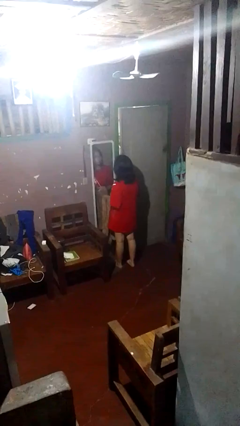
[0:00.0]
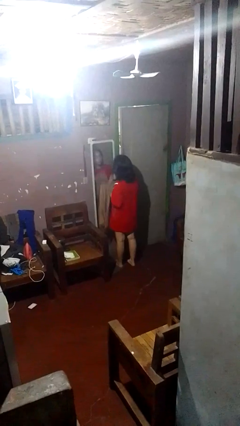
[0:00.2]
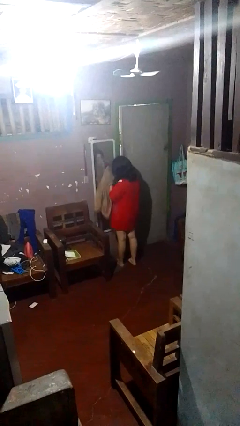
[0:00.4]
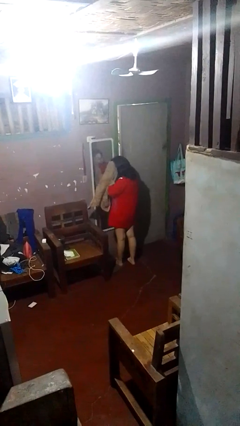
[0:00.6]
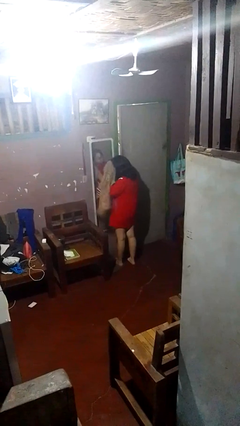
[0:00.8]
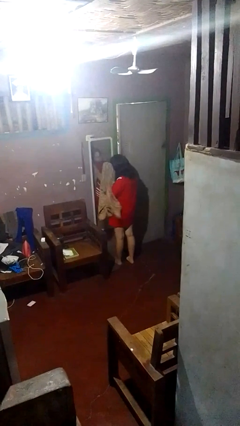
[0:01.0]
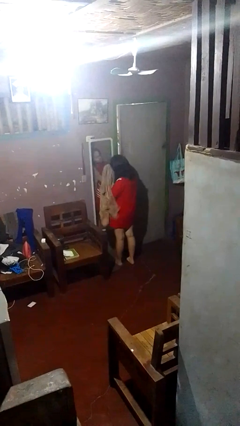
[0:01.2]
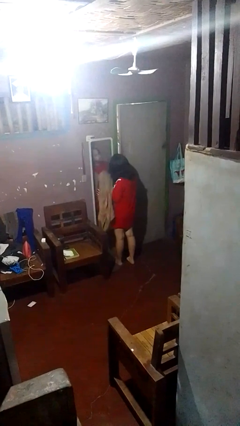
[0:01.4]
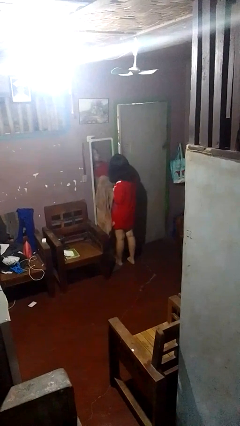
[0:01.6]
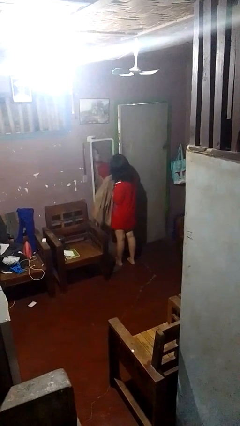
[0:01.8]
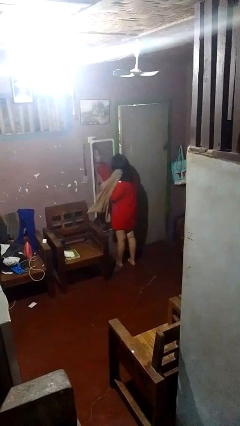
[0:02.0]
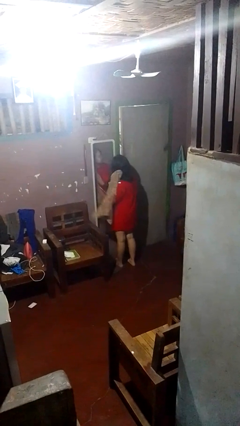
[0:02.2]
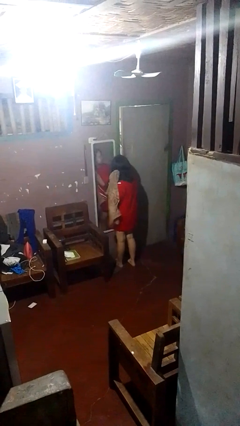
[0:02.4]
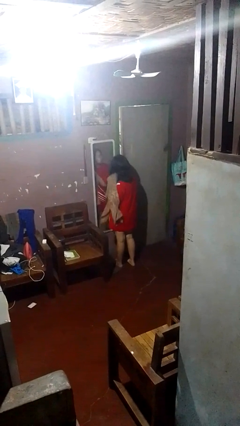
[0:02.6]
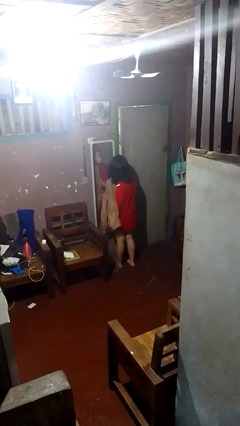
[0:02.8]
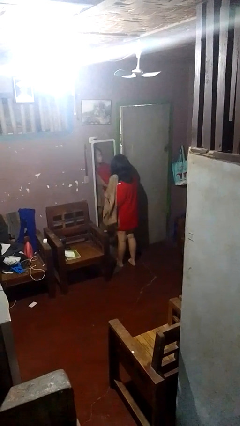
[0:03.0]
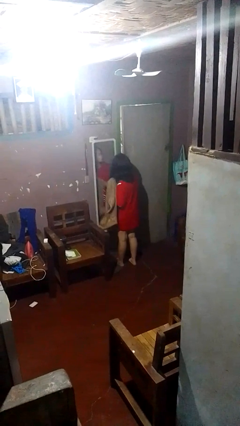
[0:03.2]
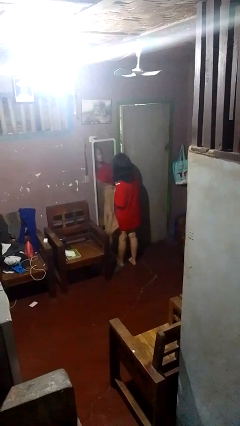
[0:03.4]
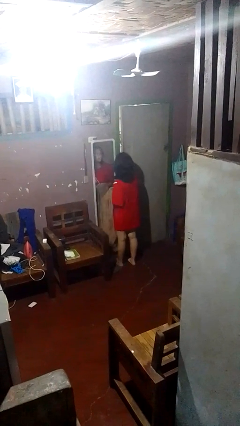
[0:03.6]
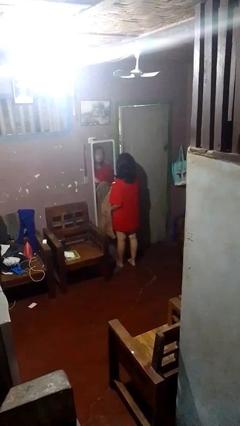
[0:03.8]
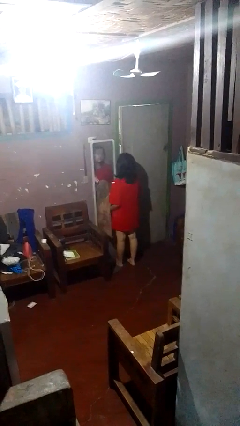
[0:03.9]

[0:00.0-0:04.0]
person dries hair with towel

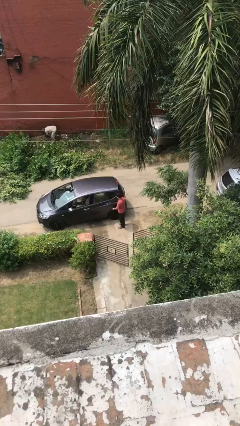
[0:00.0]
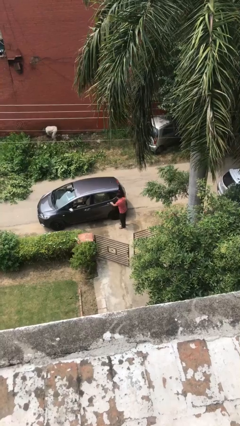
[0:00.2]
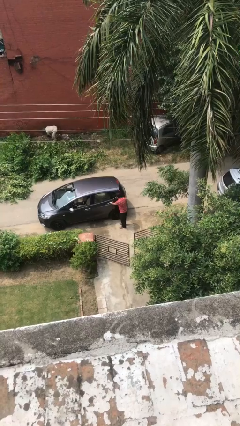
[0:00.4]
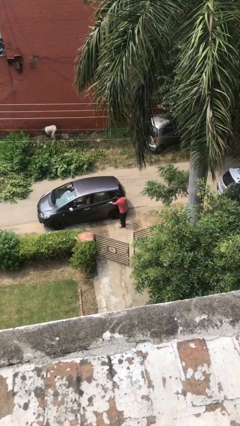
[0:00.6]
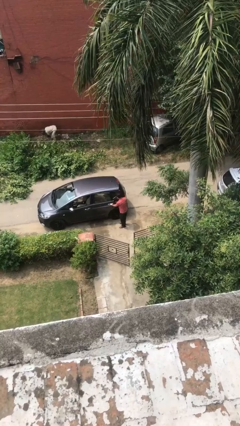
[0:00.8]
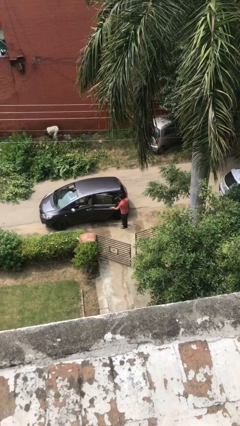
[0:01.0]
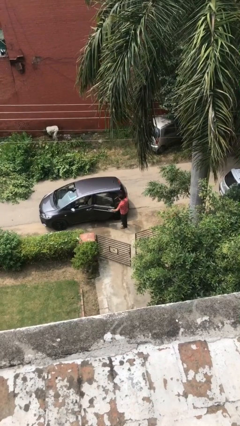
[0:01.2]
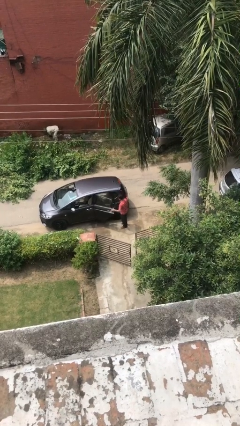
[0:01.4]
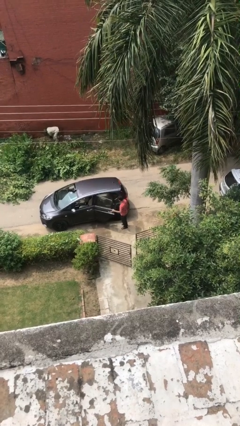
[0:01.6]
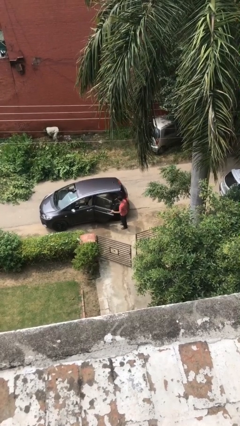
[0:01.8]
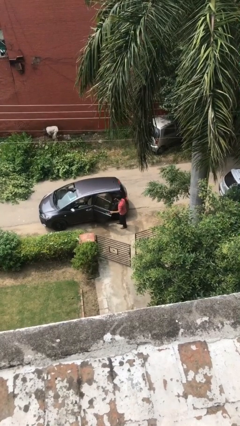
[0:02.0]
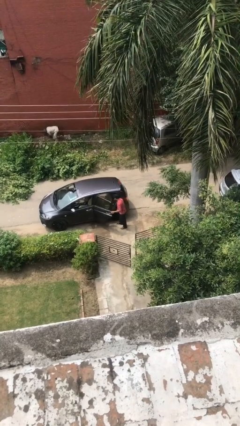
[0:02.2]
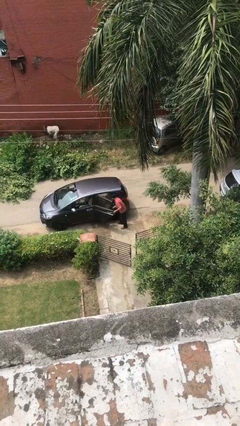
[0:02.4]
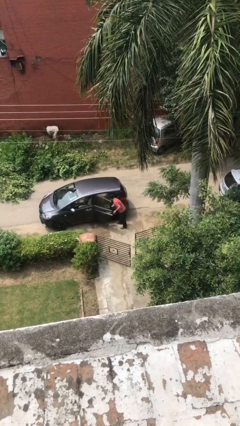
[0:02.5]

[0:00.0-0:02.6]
person opens car door

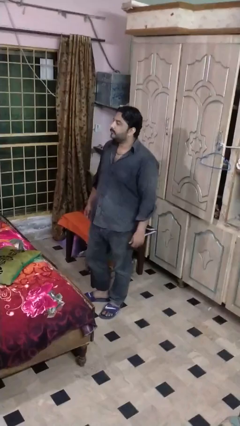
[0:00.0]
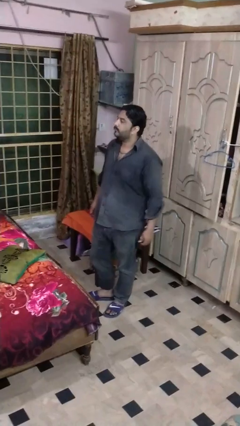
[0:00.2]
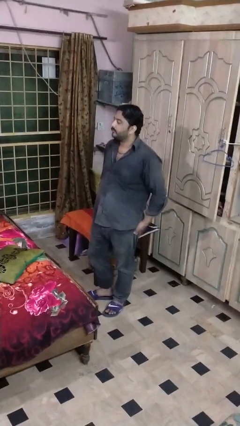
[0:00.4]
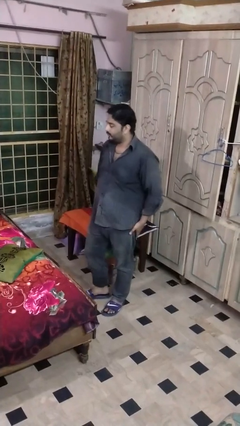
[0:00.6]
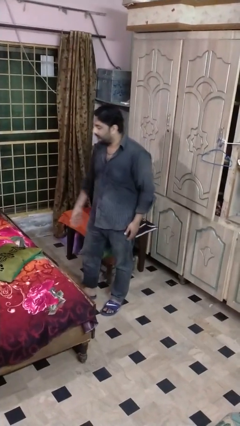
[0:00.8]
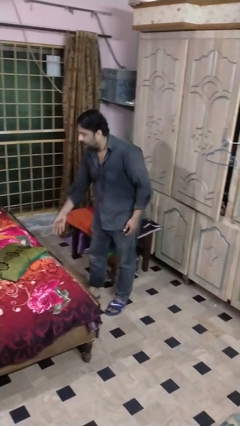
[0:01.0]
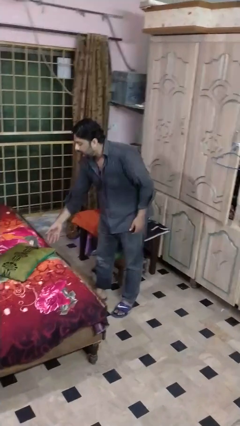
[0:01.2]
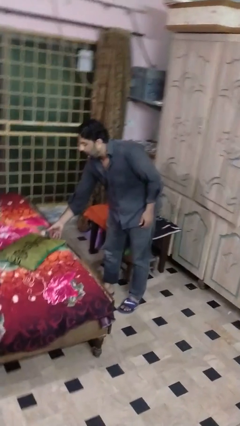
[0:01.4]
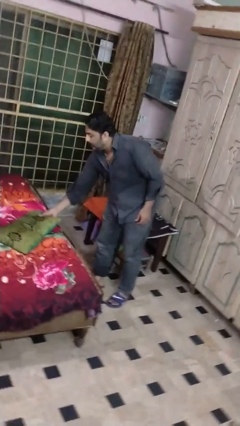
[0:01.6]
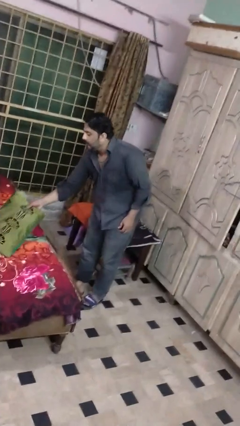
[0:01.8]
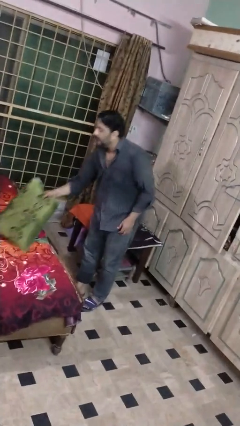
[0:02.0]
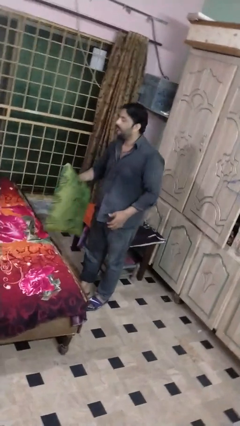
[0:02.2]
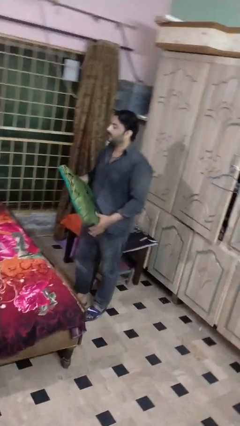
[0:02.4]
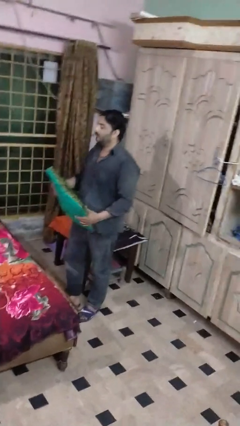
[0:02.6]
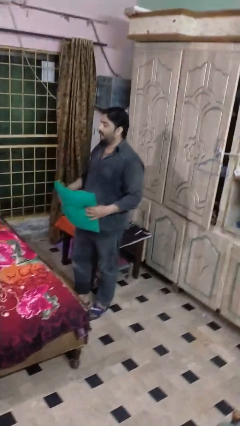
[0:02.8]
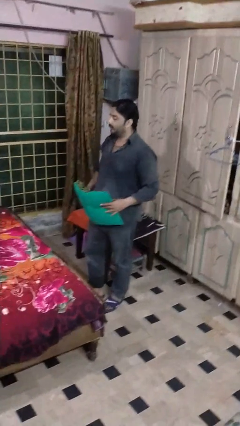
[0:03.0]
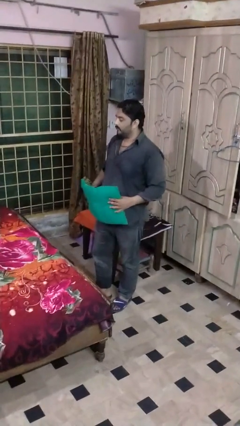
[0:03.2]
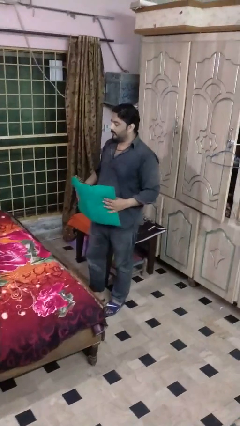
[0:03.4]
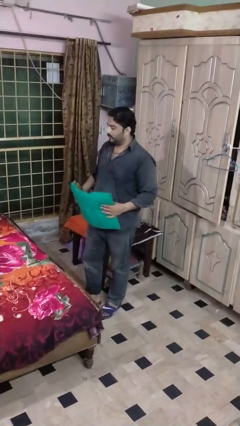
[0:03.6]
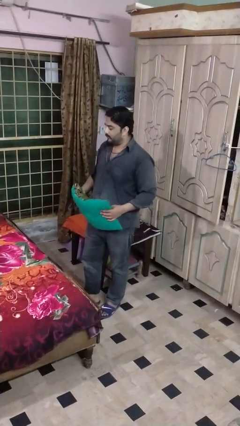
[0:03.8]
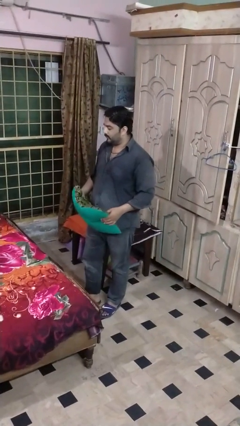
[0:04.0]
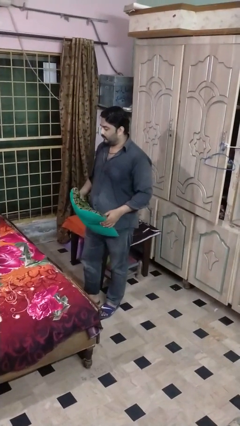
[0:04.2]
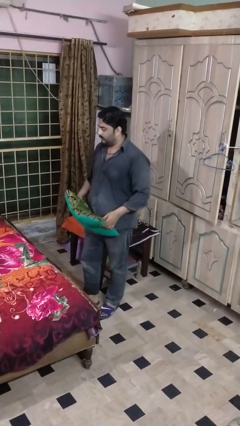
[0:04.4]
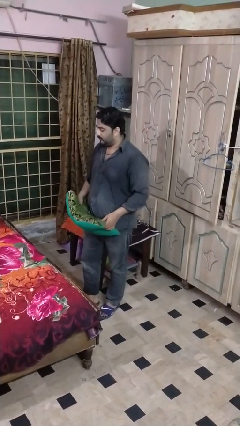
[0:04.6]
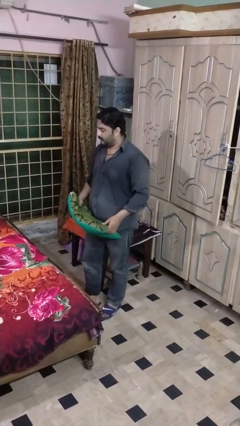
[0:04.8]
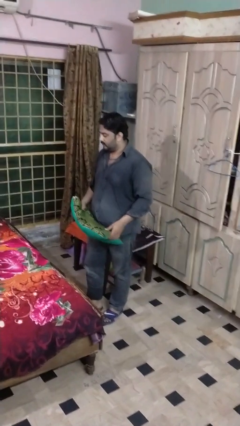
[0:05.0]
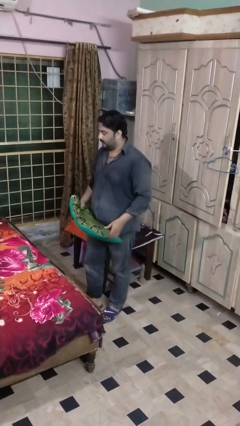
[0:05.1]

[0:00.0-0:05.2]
person picks up object from bed

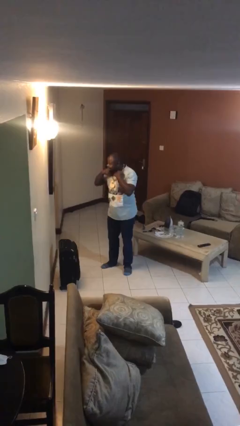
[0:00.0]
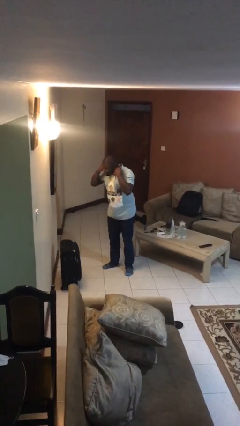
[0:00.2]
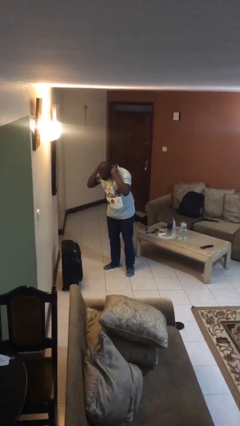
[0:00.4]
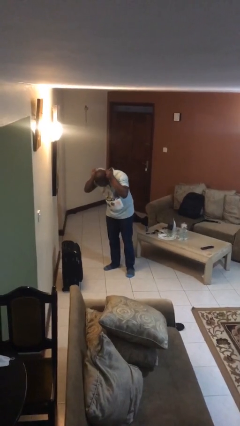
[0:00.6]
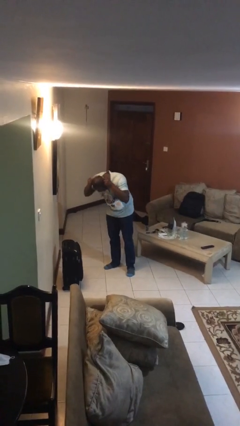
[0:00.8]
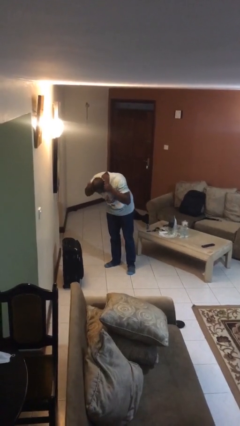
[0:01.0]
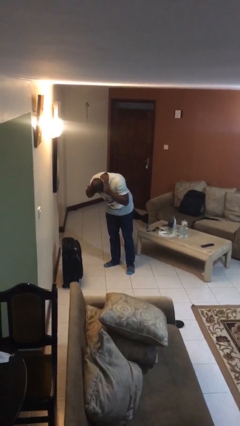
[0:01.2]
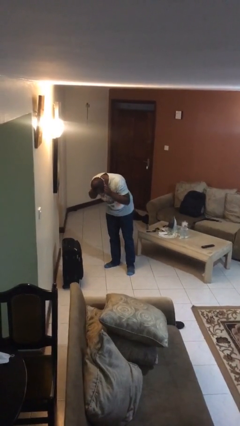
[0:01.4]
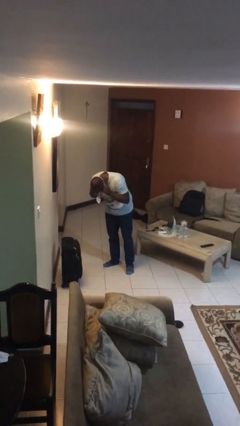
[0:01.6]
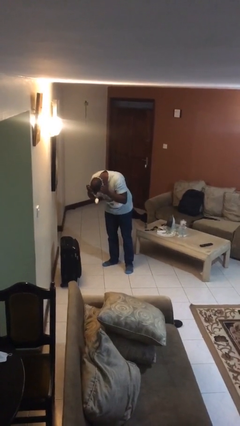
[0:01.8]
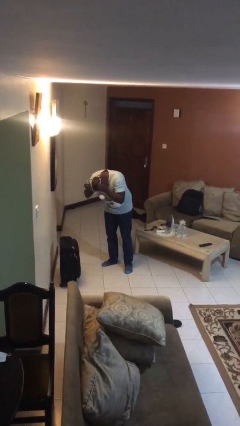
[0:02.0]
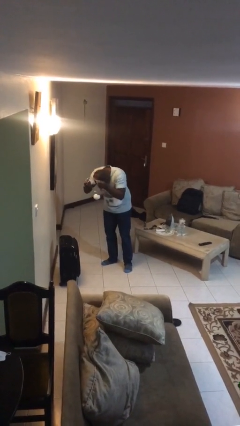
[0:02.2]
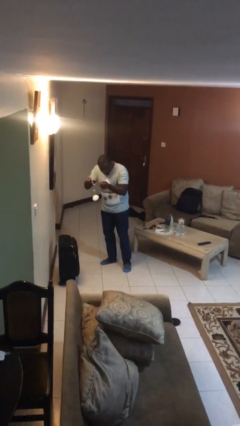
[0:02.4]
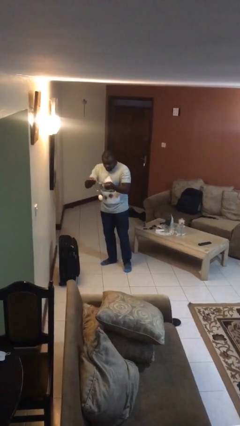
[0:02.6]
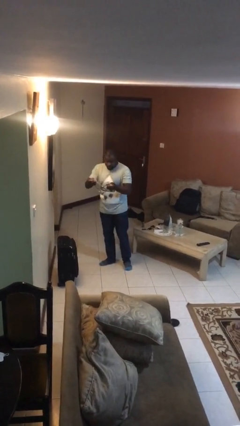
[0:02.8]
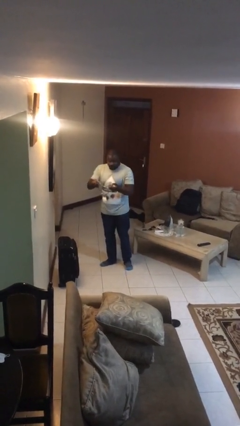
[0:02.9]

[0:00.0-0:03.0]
person takes off necklace

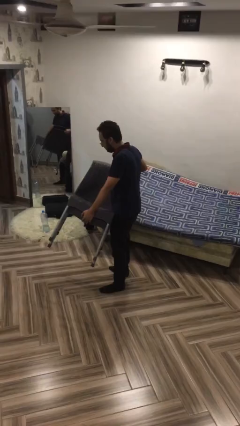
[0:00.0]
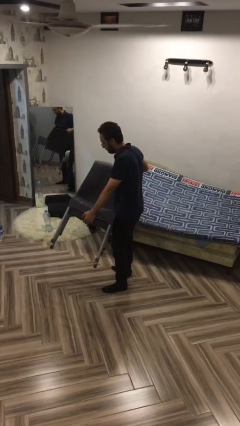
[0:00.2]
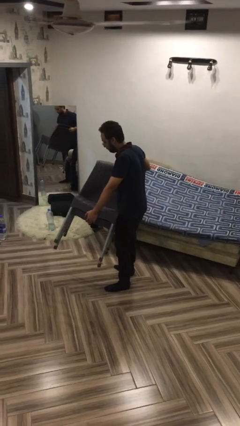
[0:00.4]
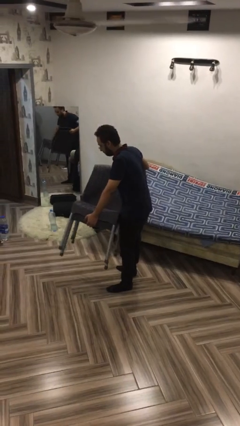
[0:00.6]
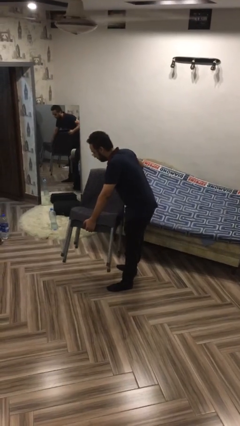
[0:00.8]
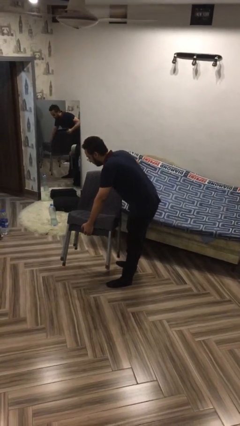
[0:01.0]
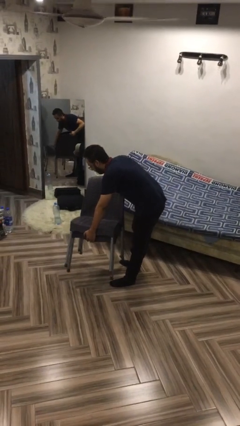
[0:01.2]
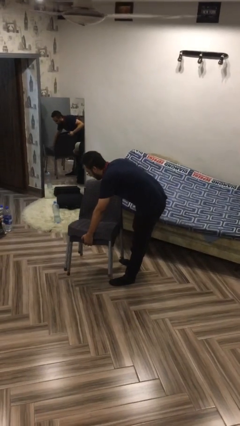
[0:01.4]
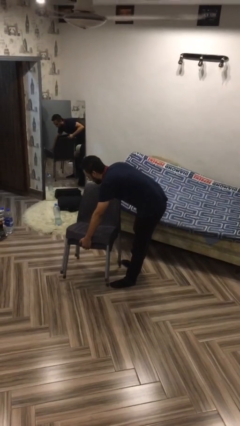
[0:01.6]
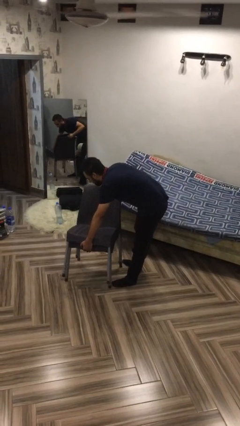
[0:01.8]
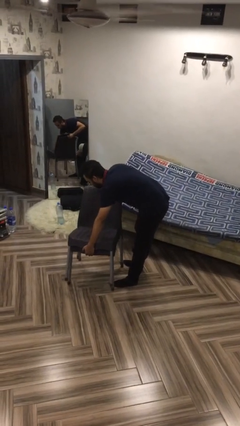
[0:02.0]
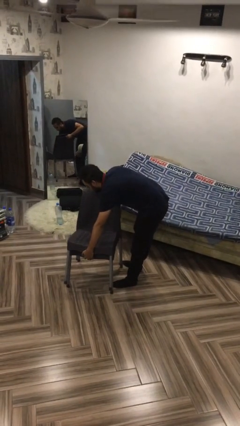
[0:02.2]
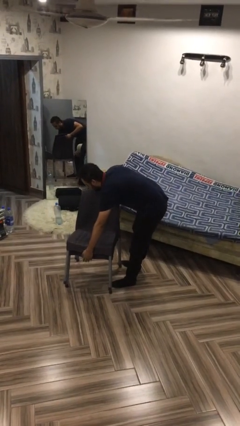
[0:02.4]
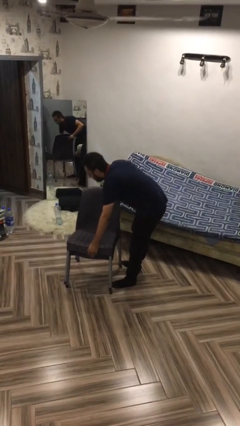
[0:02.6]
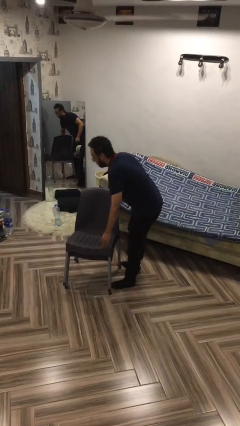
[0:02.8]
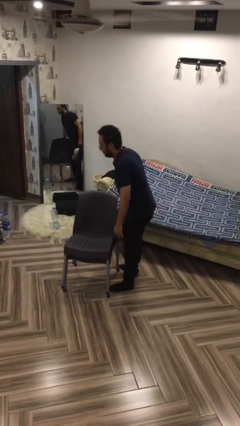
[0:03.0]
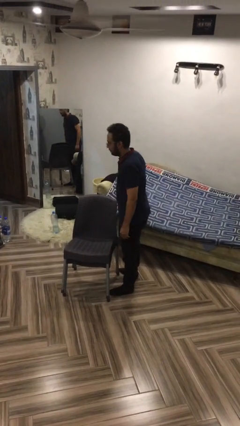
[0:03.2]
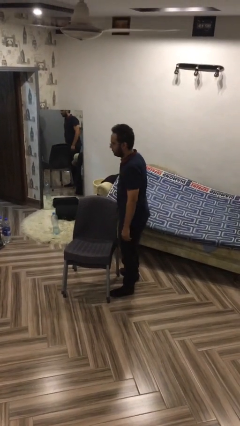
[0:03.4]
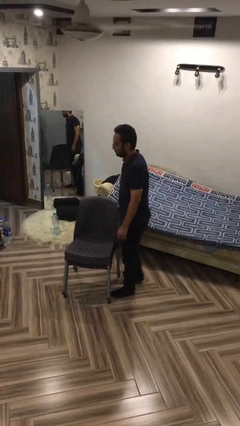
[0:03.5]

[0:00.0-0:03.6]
person puts down object on floor
